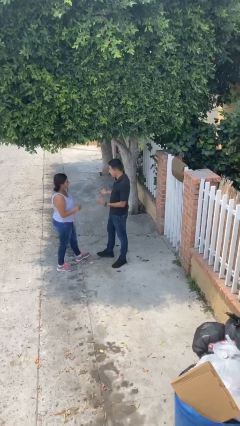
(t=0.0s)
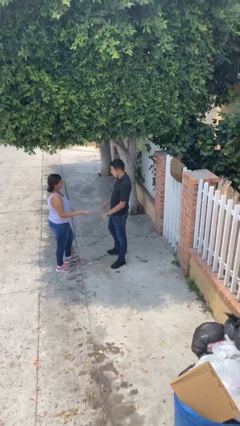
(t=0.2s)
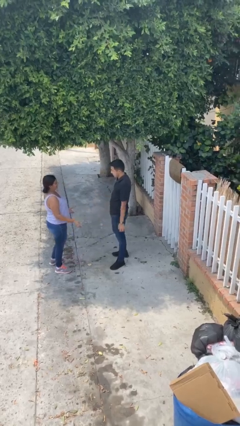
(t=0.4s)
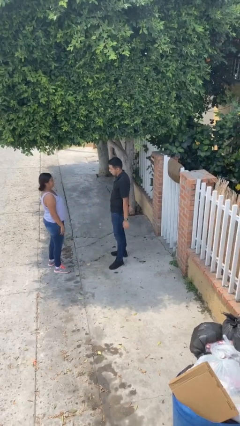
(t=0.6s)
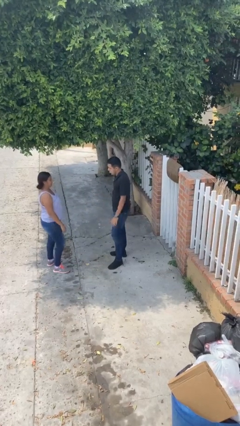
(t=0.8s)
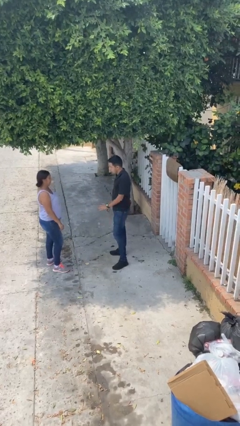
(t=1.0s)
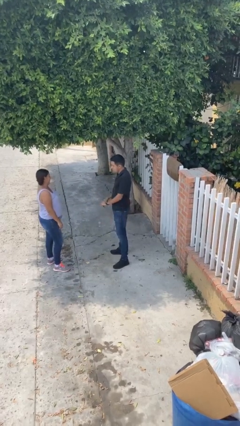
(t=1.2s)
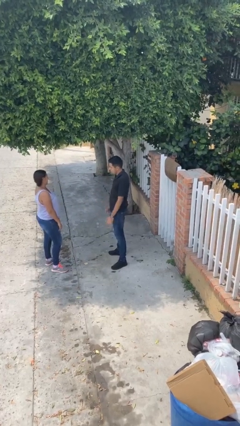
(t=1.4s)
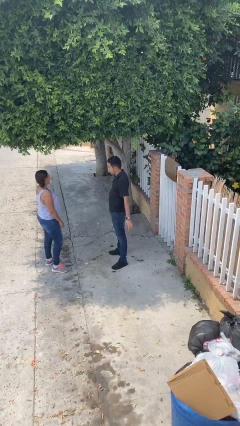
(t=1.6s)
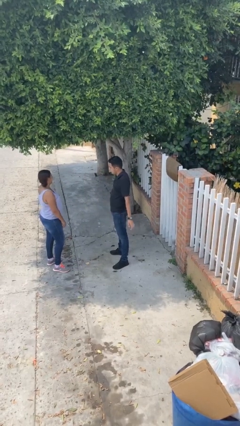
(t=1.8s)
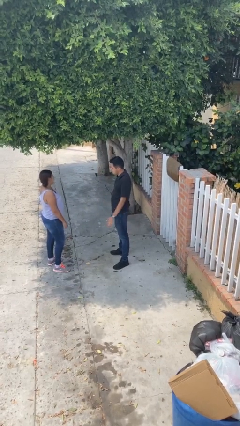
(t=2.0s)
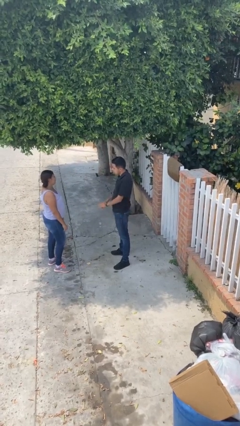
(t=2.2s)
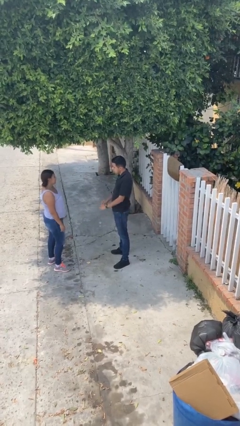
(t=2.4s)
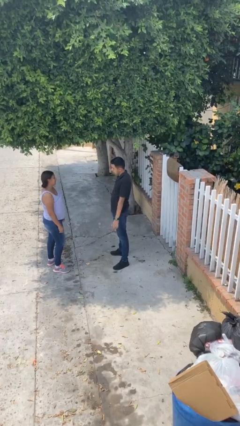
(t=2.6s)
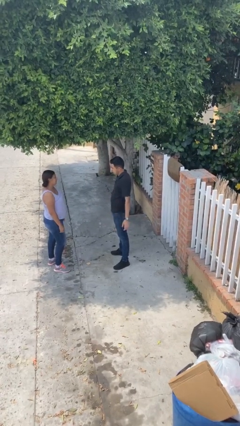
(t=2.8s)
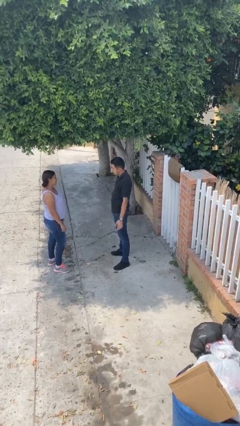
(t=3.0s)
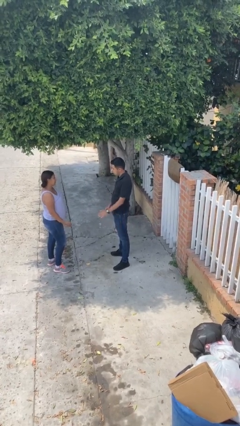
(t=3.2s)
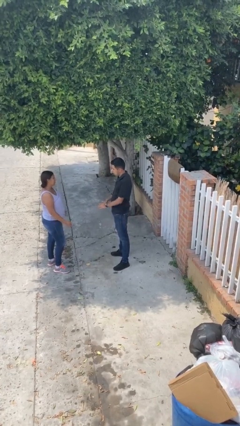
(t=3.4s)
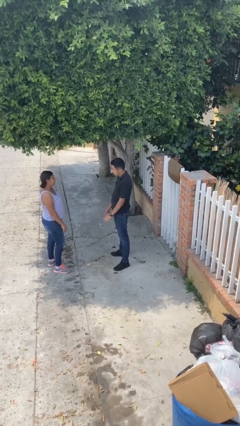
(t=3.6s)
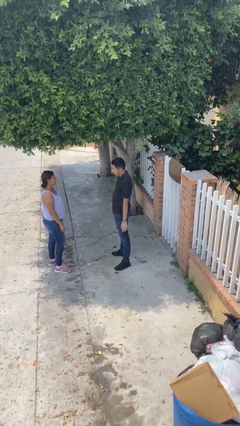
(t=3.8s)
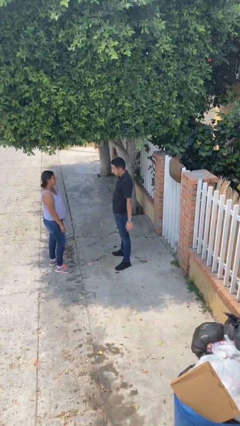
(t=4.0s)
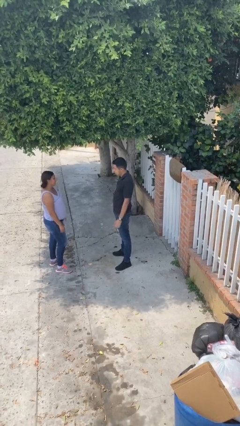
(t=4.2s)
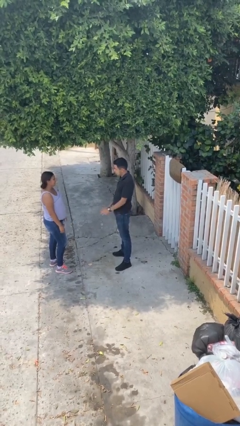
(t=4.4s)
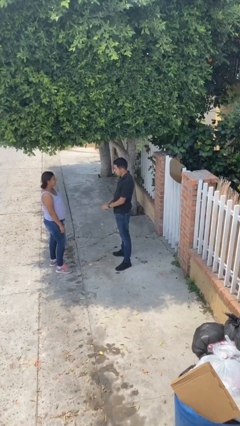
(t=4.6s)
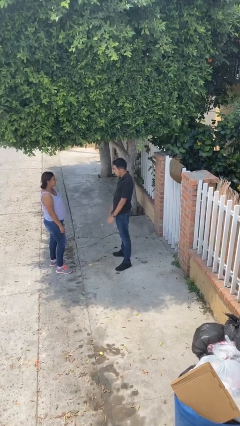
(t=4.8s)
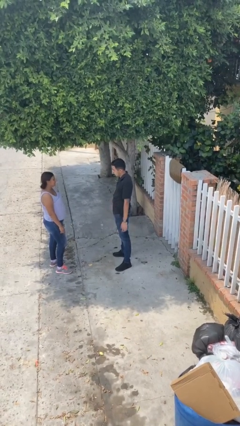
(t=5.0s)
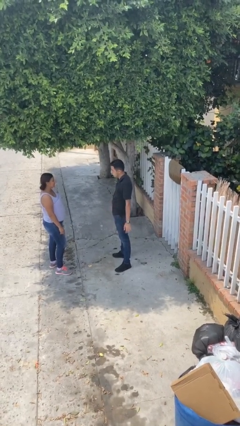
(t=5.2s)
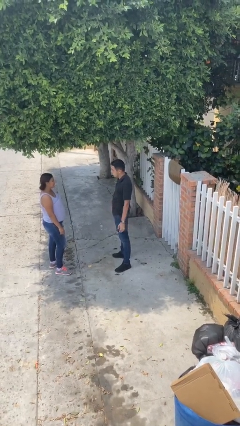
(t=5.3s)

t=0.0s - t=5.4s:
person talks to person

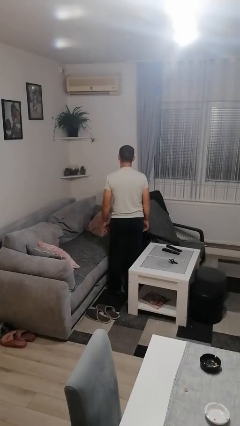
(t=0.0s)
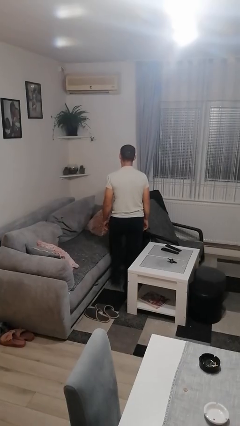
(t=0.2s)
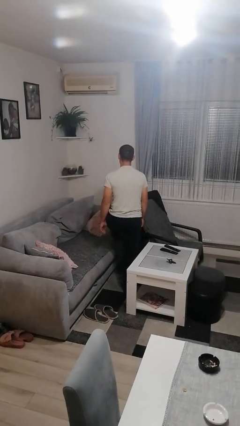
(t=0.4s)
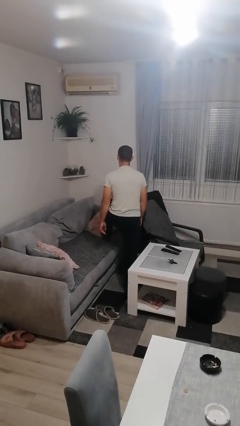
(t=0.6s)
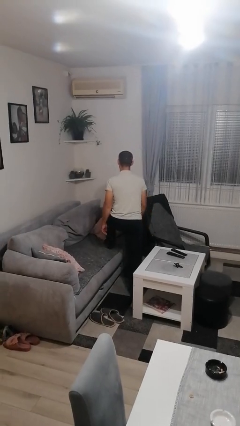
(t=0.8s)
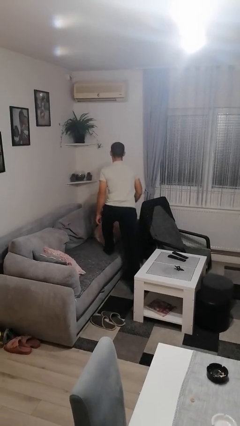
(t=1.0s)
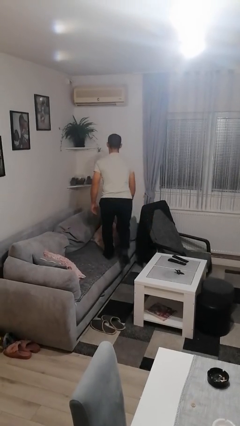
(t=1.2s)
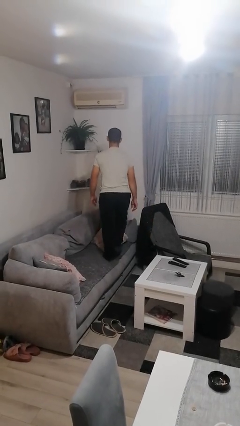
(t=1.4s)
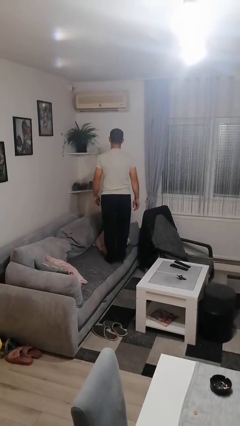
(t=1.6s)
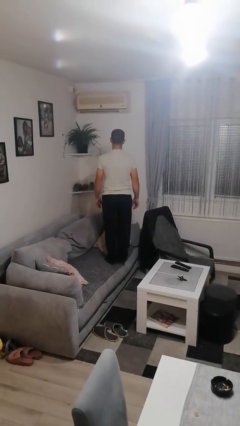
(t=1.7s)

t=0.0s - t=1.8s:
person climbs on couch

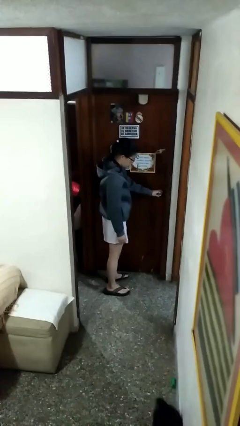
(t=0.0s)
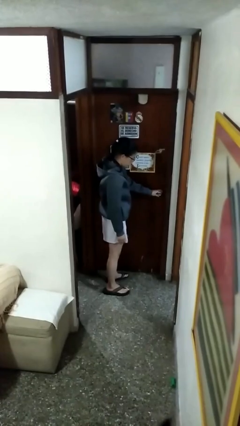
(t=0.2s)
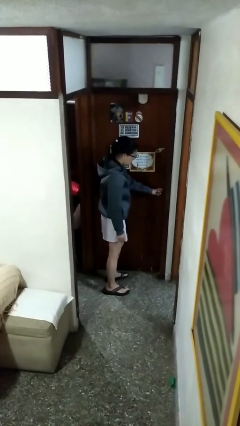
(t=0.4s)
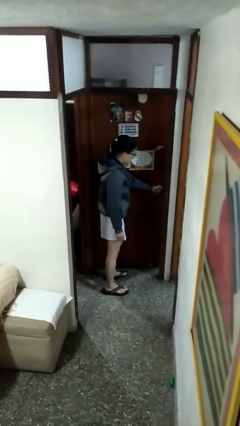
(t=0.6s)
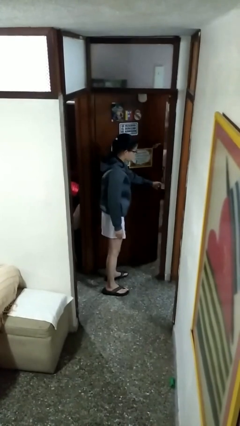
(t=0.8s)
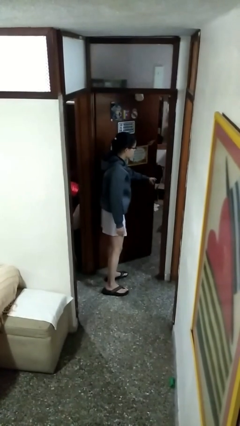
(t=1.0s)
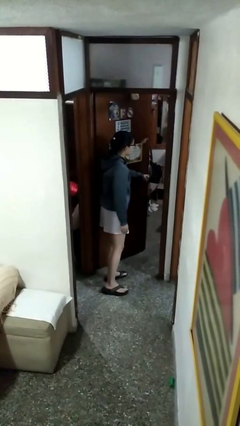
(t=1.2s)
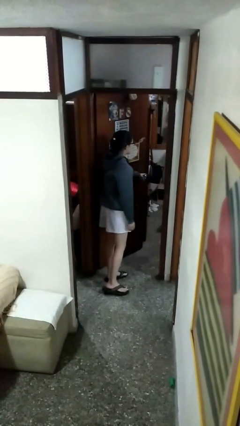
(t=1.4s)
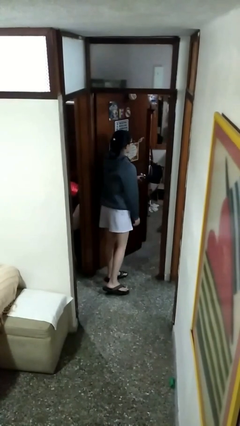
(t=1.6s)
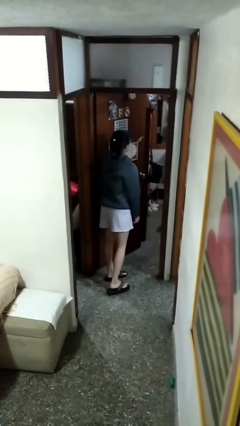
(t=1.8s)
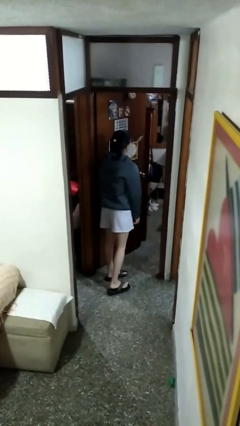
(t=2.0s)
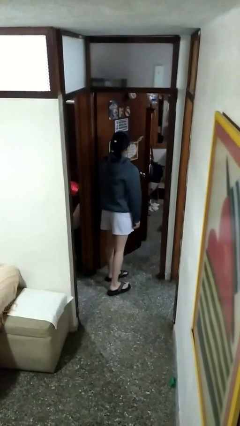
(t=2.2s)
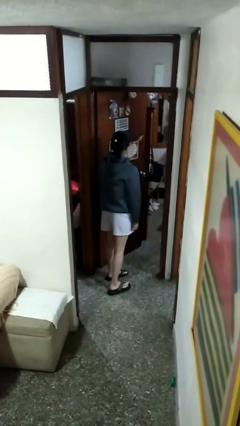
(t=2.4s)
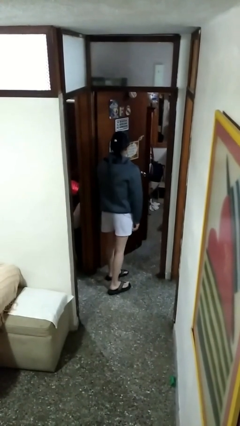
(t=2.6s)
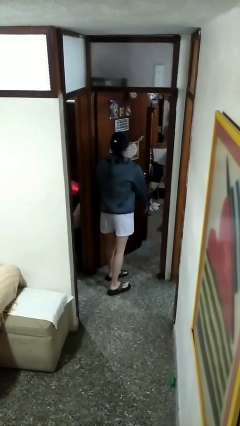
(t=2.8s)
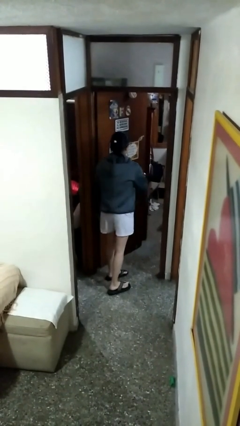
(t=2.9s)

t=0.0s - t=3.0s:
person opens facility door

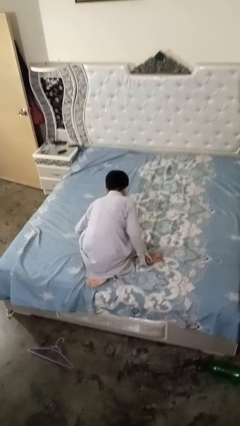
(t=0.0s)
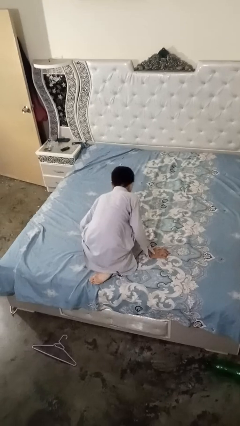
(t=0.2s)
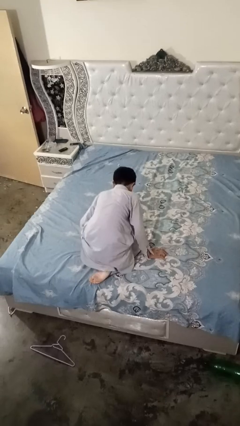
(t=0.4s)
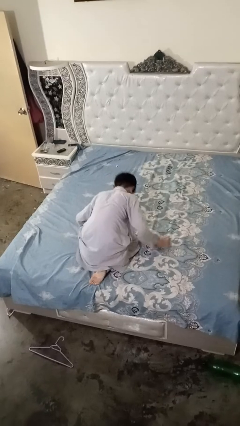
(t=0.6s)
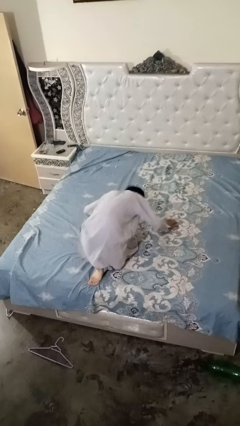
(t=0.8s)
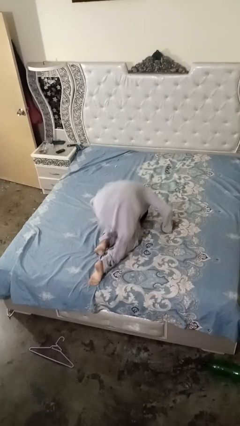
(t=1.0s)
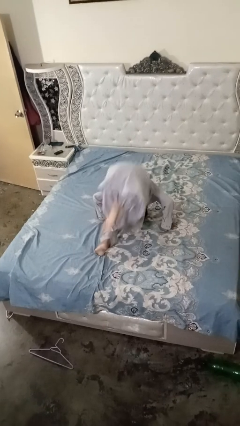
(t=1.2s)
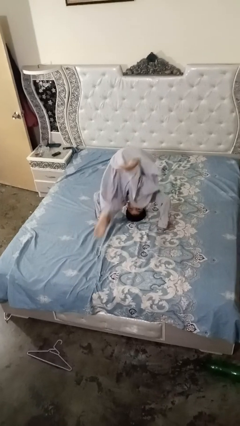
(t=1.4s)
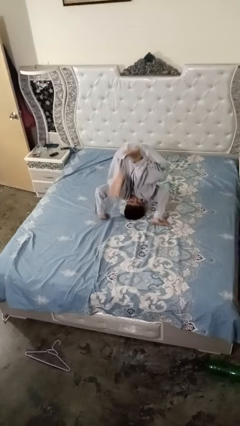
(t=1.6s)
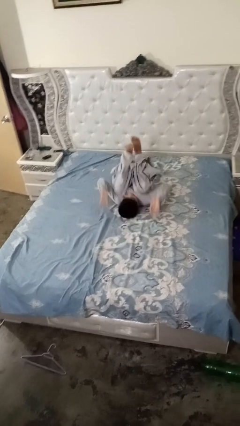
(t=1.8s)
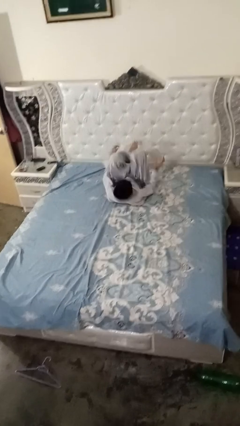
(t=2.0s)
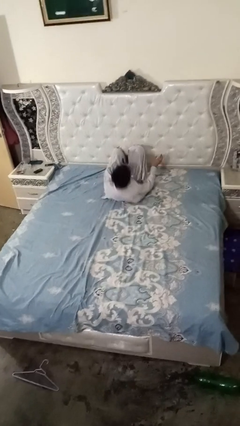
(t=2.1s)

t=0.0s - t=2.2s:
person somersaults

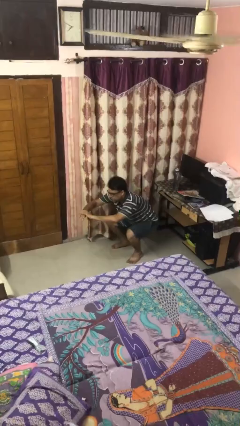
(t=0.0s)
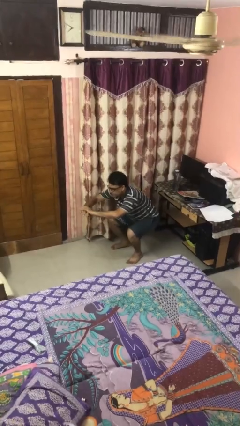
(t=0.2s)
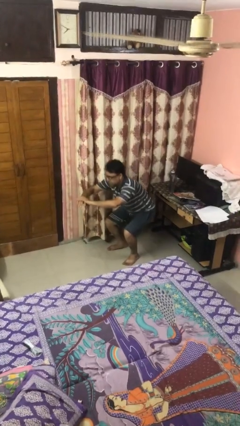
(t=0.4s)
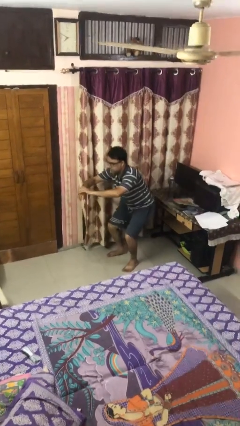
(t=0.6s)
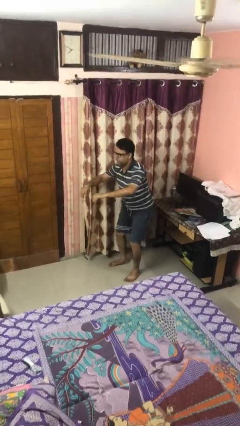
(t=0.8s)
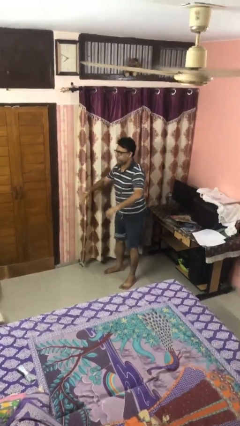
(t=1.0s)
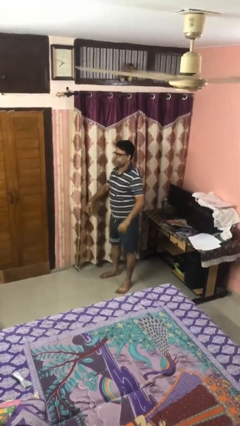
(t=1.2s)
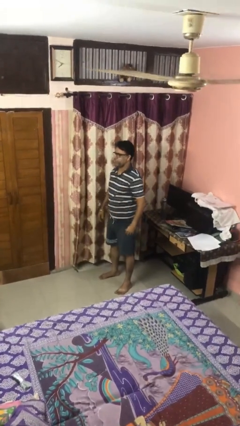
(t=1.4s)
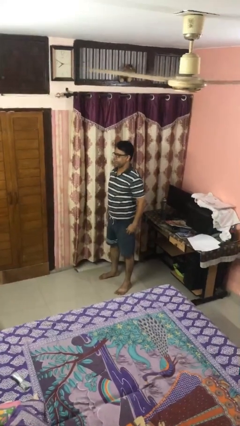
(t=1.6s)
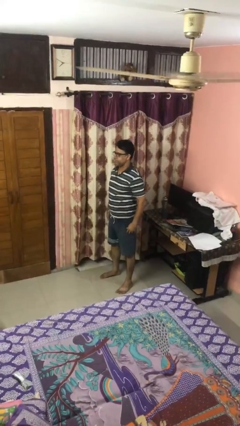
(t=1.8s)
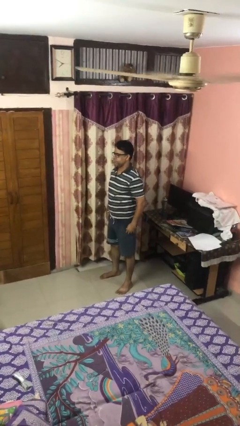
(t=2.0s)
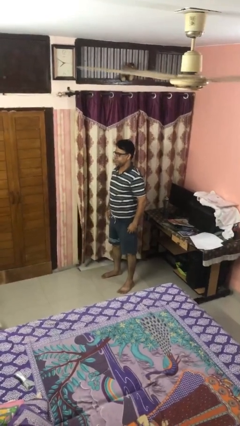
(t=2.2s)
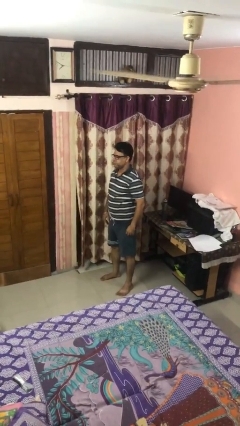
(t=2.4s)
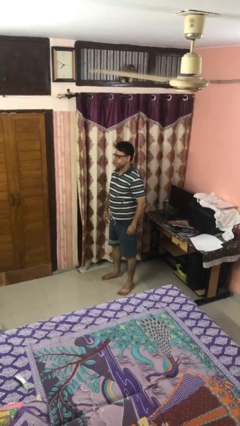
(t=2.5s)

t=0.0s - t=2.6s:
person stands up

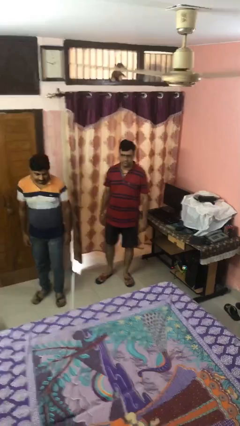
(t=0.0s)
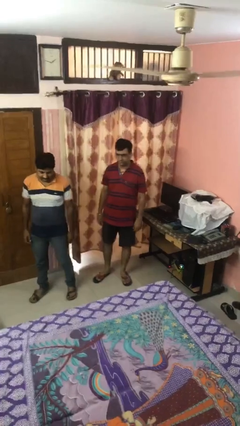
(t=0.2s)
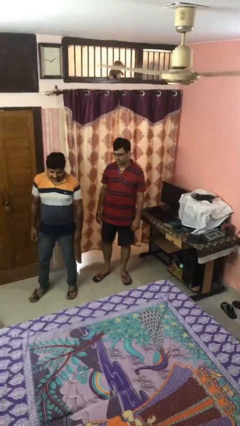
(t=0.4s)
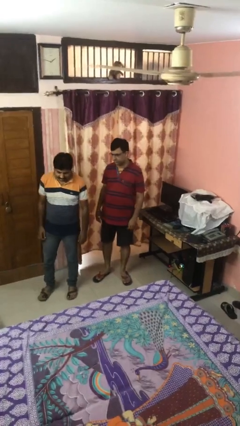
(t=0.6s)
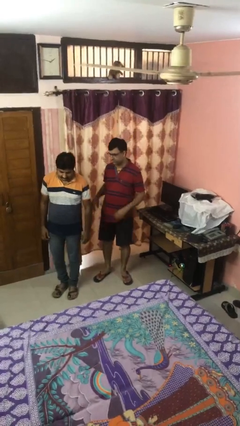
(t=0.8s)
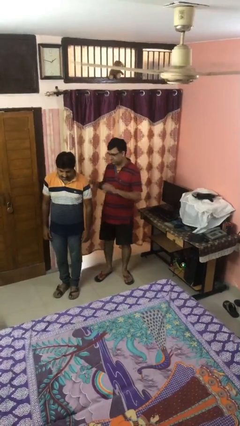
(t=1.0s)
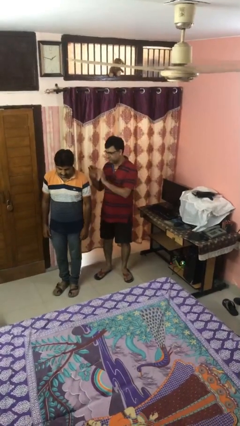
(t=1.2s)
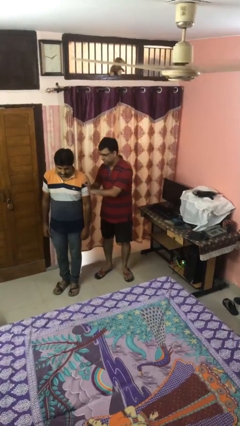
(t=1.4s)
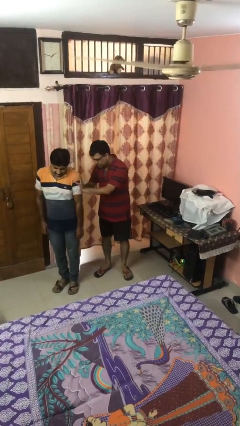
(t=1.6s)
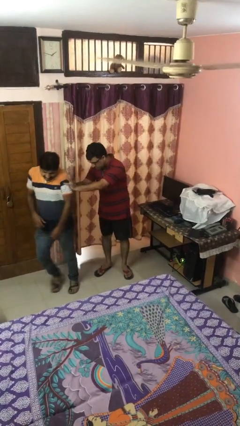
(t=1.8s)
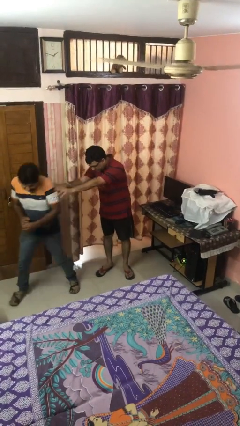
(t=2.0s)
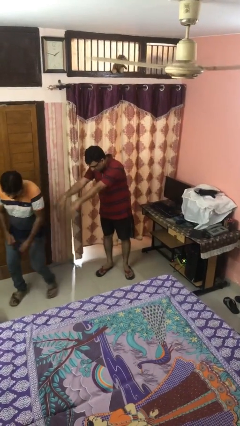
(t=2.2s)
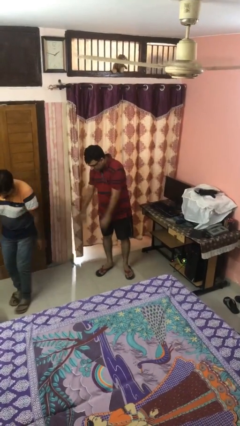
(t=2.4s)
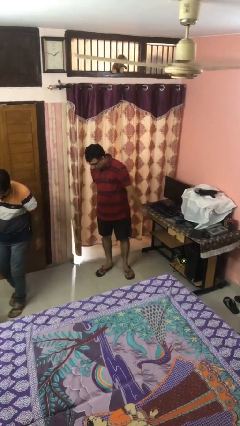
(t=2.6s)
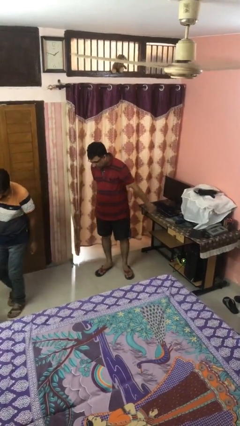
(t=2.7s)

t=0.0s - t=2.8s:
person shoves person
